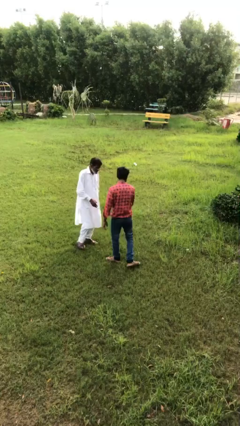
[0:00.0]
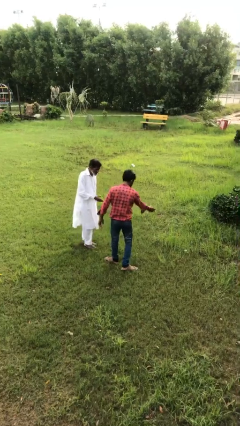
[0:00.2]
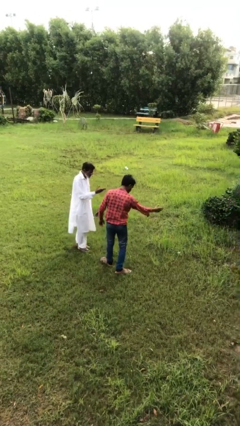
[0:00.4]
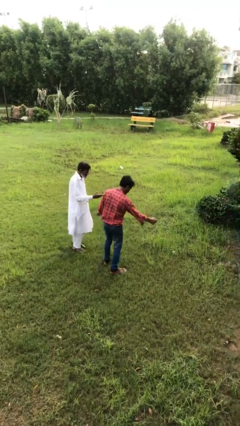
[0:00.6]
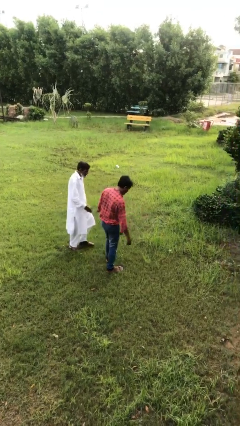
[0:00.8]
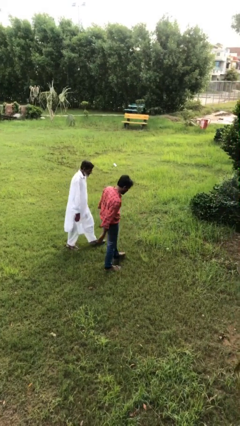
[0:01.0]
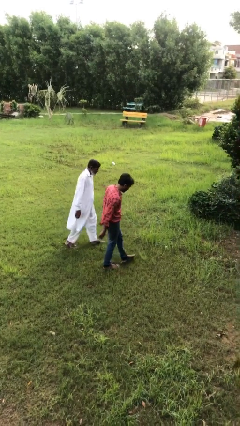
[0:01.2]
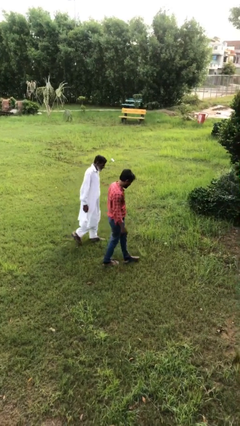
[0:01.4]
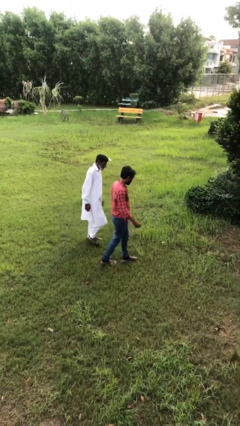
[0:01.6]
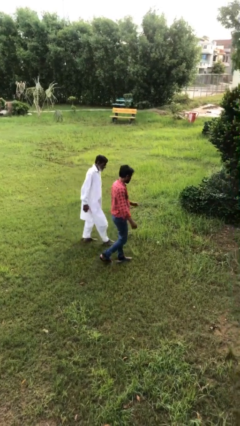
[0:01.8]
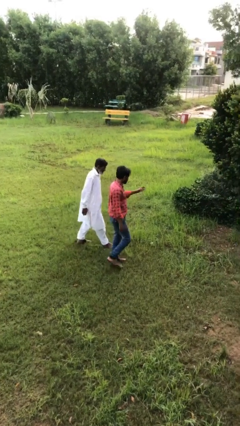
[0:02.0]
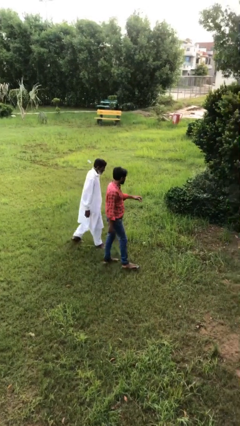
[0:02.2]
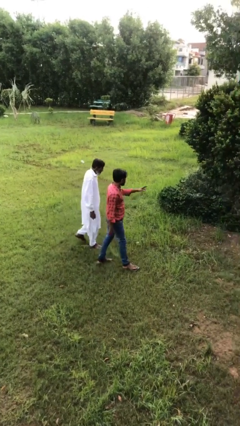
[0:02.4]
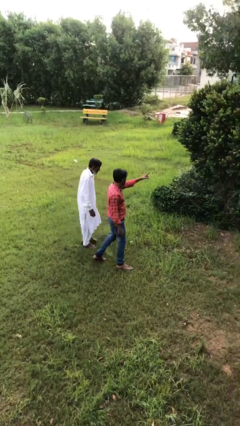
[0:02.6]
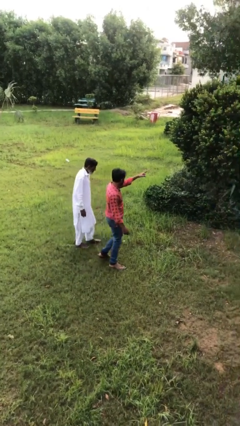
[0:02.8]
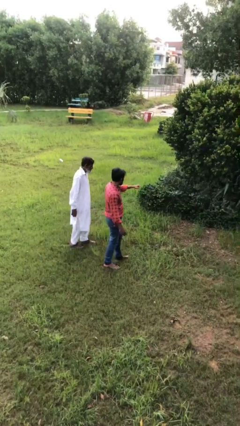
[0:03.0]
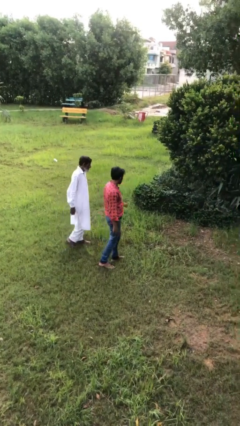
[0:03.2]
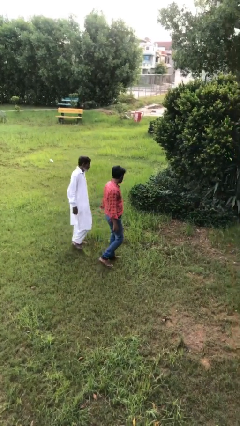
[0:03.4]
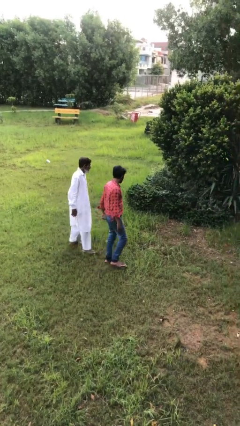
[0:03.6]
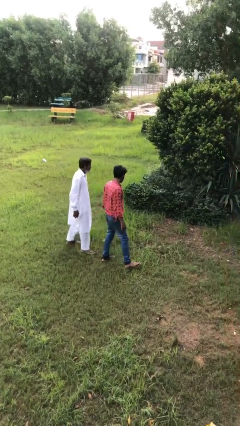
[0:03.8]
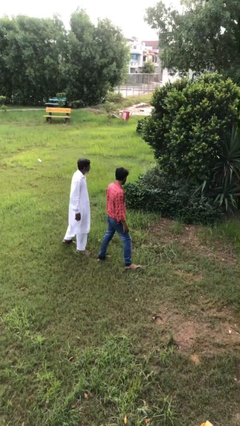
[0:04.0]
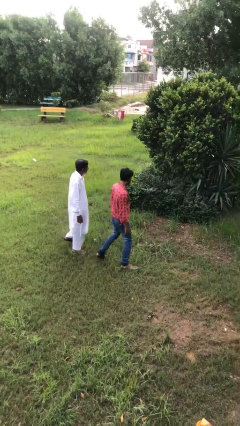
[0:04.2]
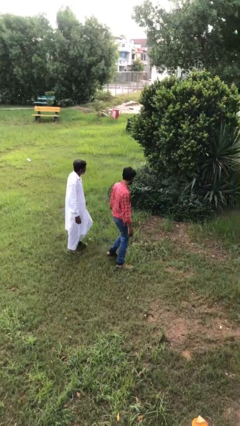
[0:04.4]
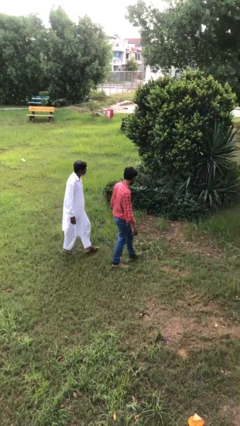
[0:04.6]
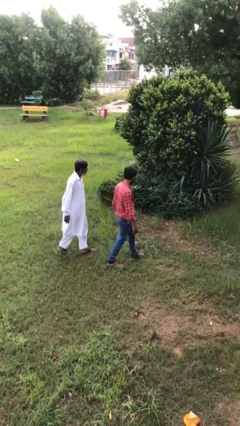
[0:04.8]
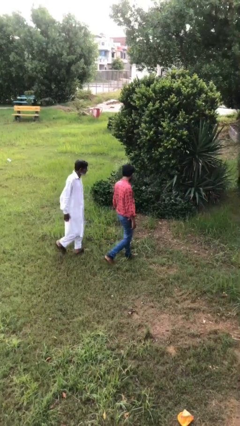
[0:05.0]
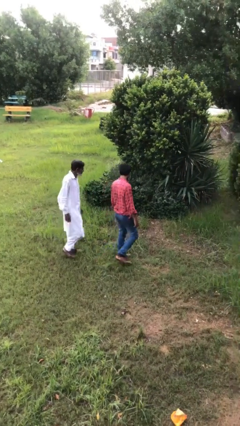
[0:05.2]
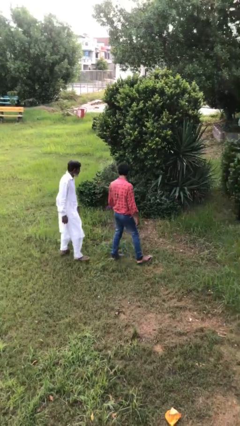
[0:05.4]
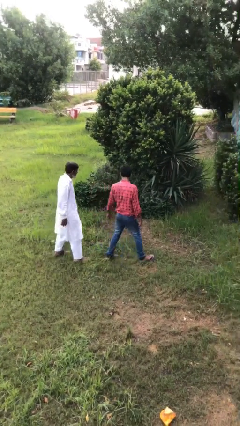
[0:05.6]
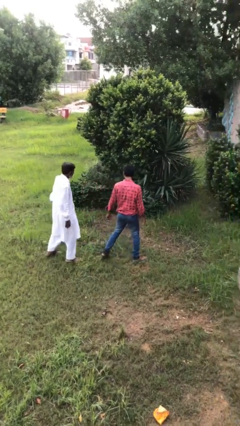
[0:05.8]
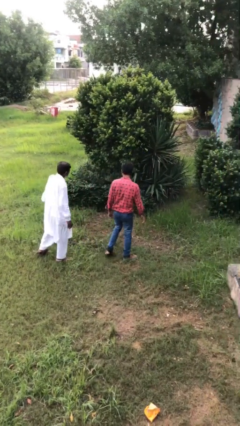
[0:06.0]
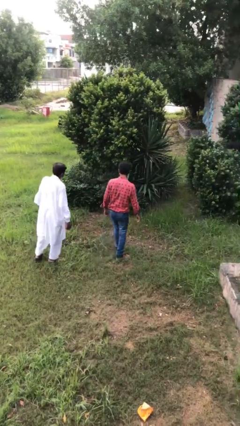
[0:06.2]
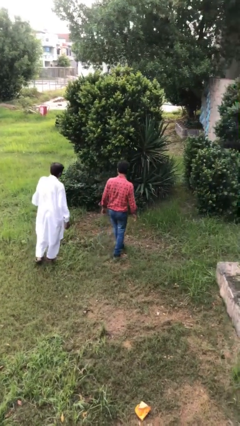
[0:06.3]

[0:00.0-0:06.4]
person talks to person

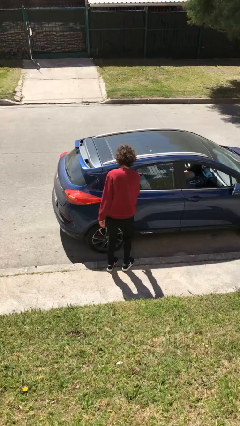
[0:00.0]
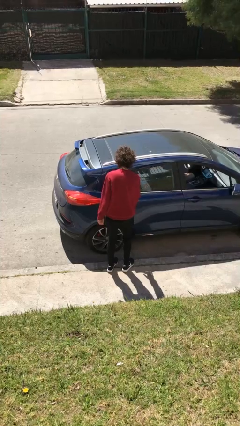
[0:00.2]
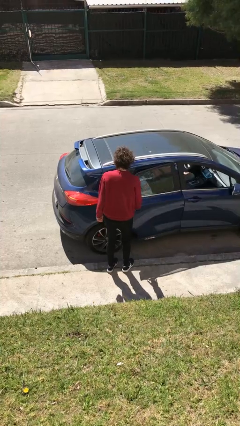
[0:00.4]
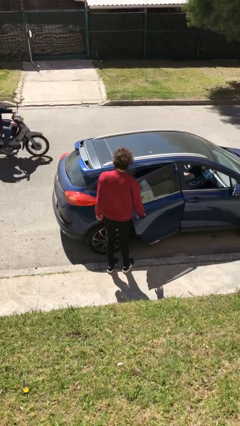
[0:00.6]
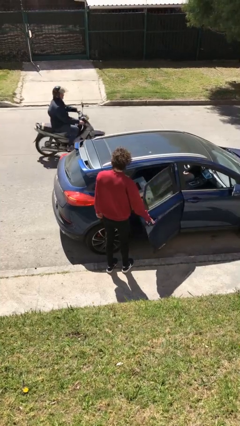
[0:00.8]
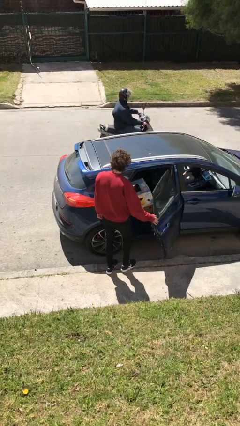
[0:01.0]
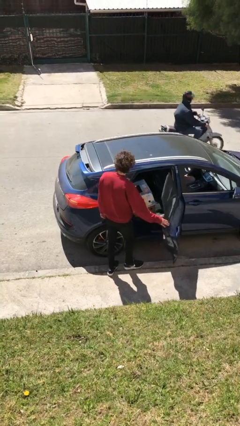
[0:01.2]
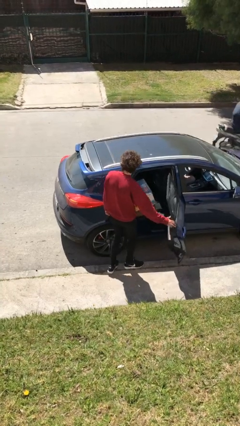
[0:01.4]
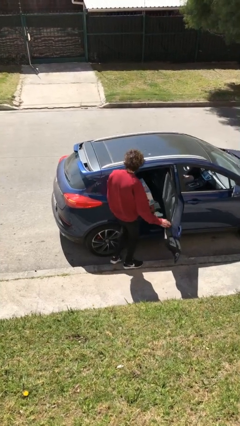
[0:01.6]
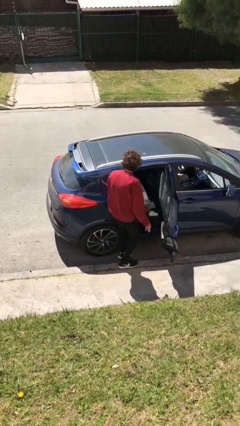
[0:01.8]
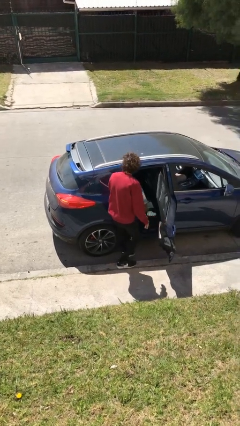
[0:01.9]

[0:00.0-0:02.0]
person opens car door

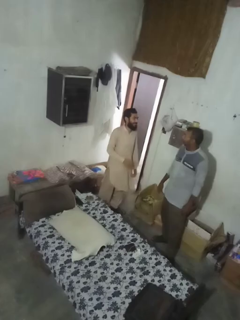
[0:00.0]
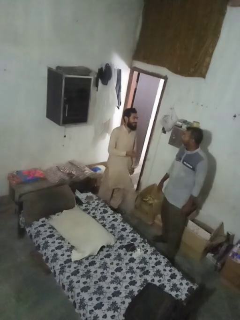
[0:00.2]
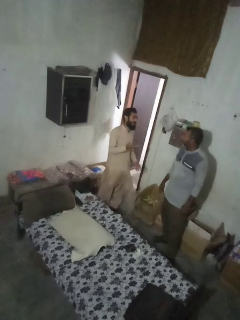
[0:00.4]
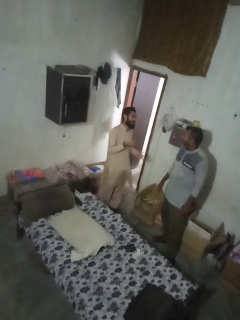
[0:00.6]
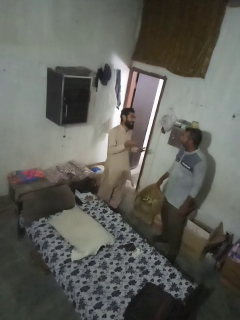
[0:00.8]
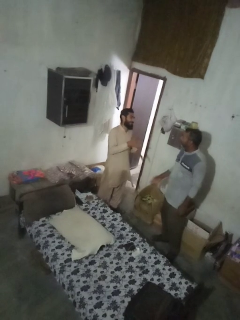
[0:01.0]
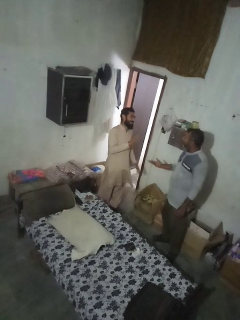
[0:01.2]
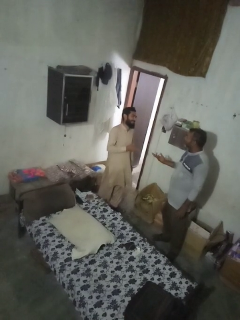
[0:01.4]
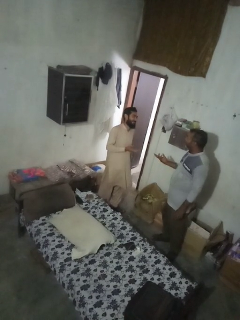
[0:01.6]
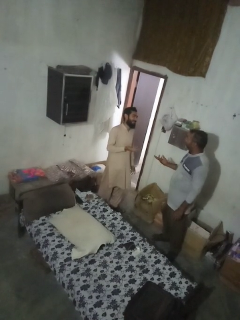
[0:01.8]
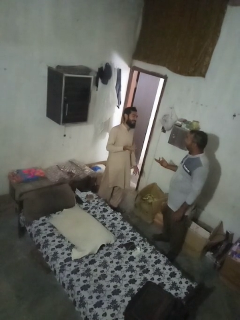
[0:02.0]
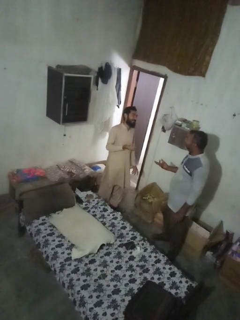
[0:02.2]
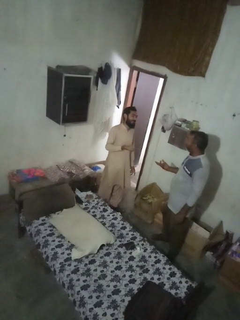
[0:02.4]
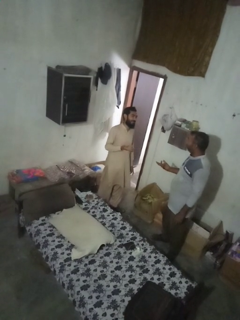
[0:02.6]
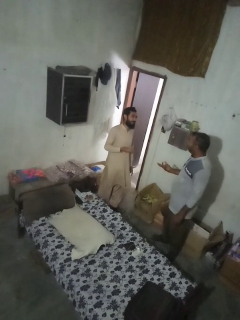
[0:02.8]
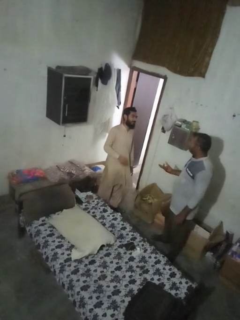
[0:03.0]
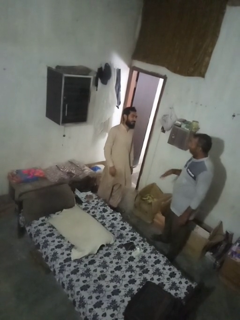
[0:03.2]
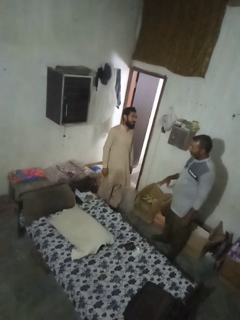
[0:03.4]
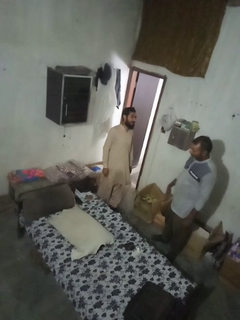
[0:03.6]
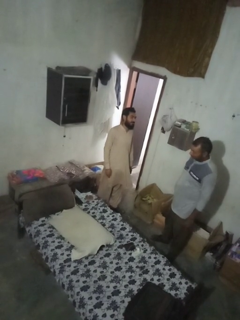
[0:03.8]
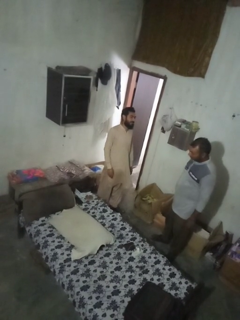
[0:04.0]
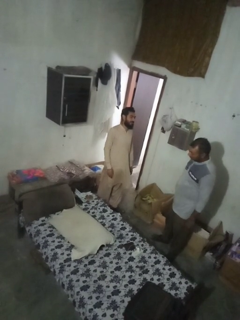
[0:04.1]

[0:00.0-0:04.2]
person laughs with person

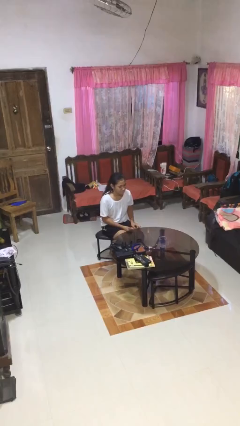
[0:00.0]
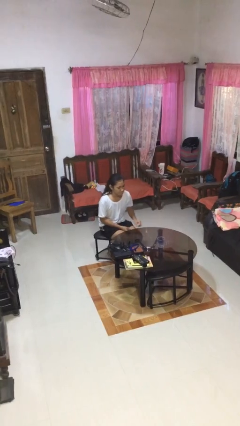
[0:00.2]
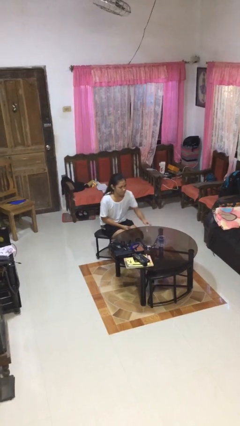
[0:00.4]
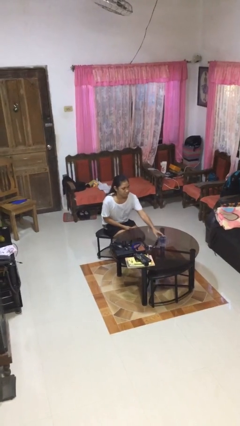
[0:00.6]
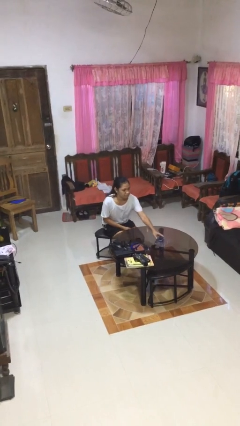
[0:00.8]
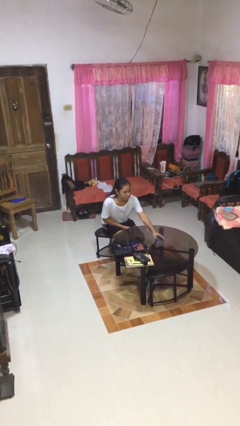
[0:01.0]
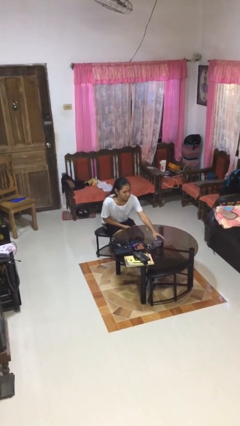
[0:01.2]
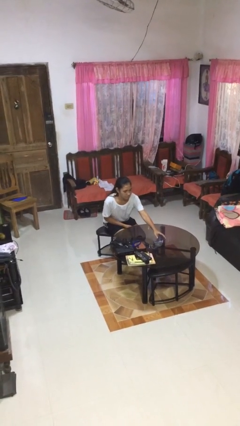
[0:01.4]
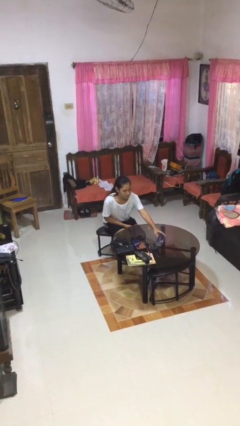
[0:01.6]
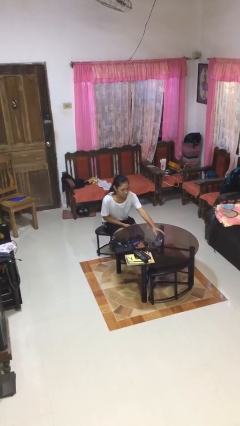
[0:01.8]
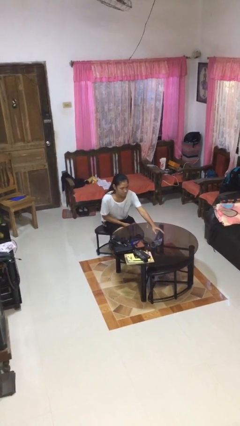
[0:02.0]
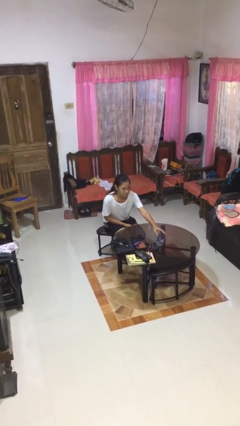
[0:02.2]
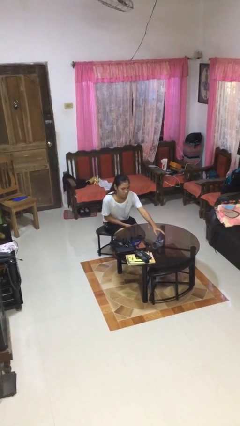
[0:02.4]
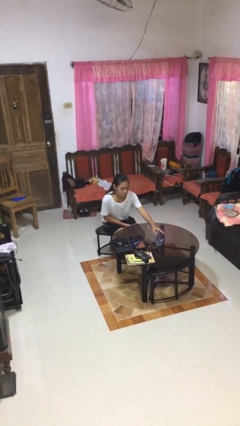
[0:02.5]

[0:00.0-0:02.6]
person knocks over glass

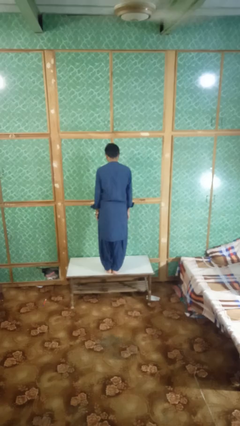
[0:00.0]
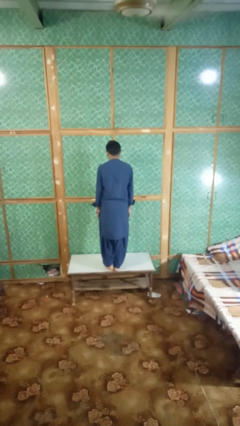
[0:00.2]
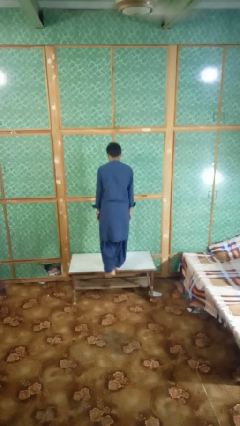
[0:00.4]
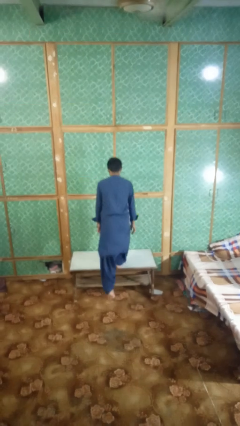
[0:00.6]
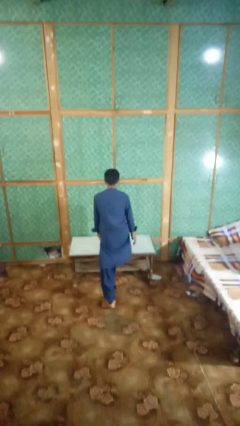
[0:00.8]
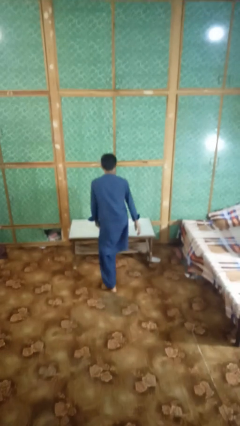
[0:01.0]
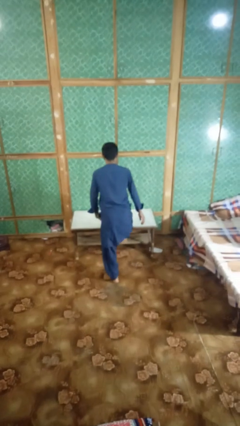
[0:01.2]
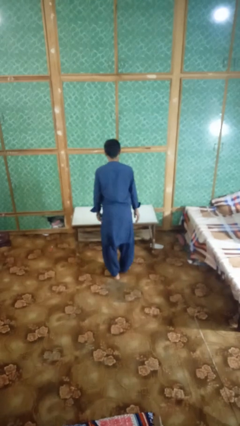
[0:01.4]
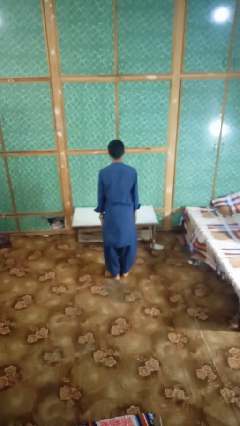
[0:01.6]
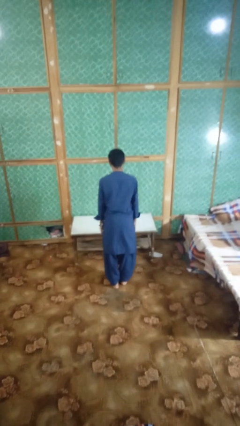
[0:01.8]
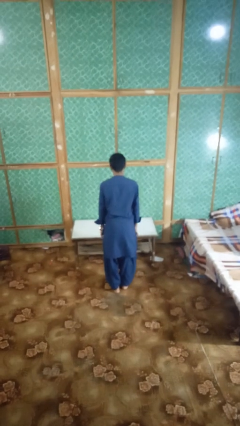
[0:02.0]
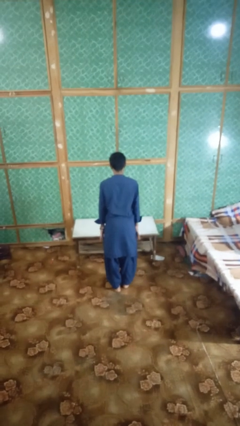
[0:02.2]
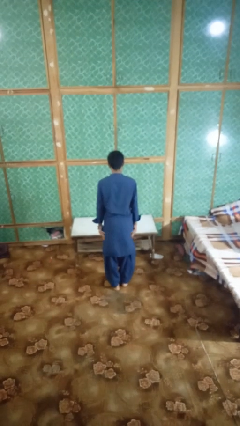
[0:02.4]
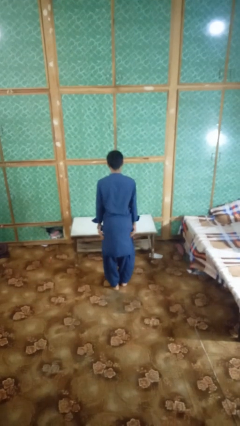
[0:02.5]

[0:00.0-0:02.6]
person climbs off table

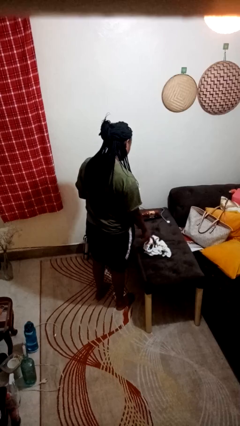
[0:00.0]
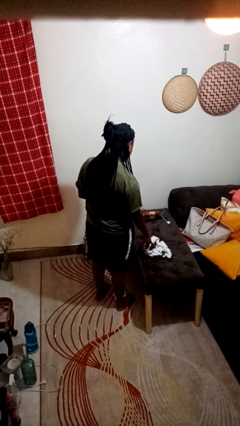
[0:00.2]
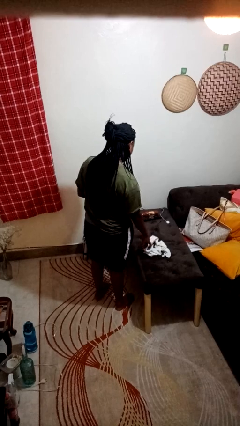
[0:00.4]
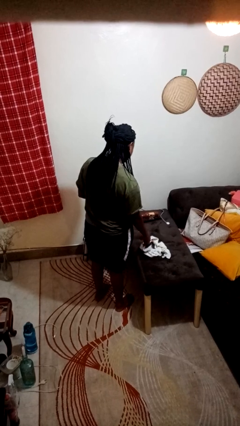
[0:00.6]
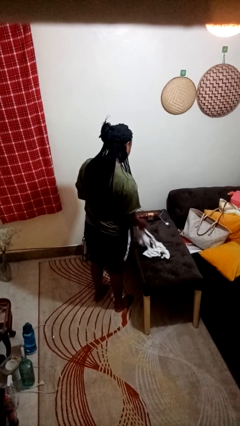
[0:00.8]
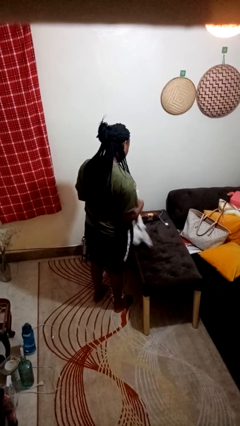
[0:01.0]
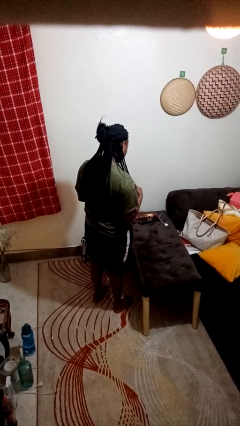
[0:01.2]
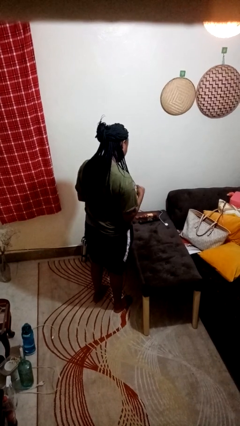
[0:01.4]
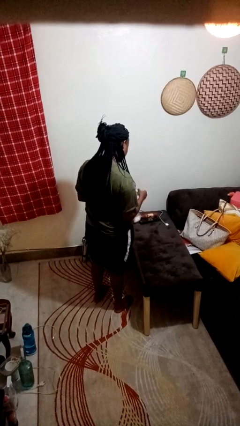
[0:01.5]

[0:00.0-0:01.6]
person picks up object from table
